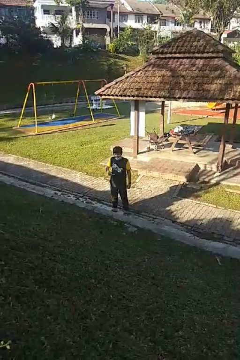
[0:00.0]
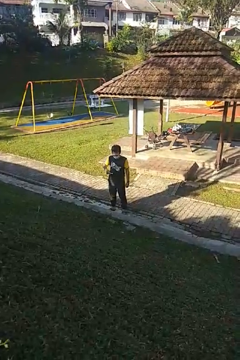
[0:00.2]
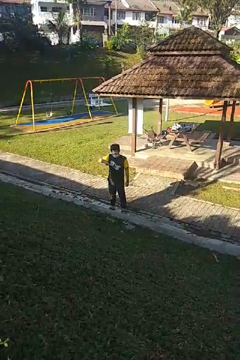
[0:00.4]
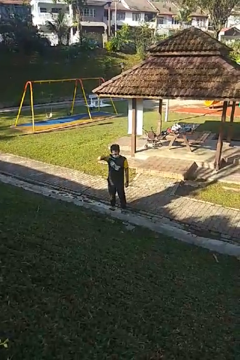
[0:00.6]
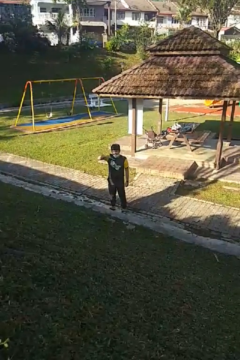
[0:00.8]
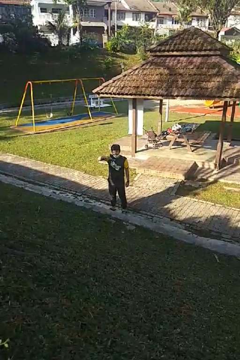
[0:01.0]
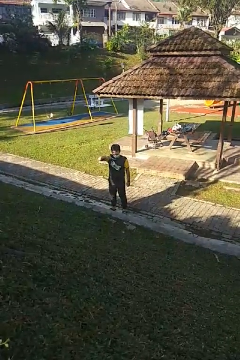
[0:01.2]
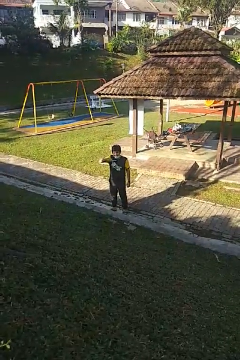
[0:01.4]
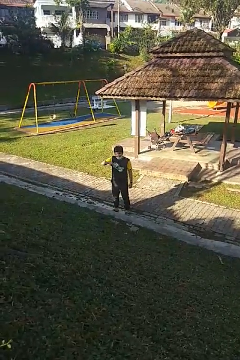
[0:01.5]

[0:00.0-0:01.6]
person brushes teeth

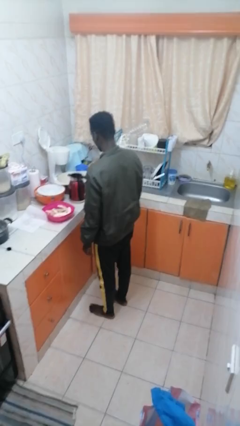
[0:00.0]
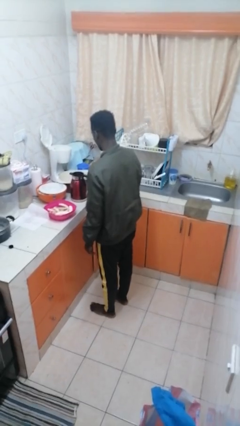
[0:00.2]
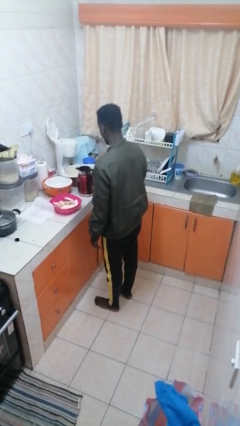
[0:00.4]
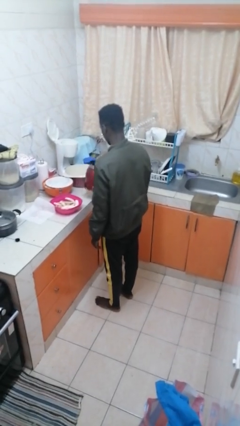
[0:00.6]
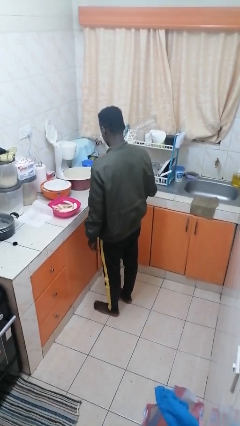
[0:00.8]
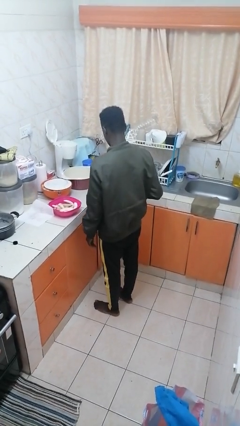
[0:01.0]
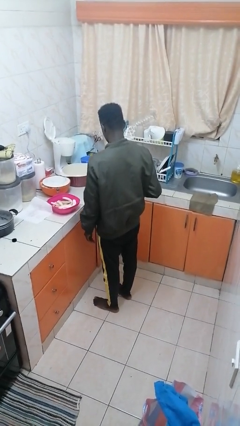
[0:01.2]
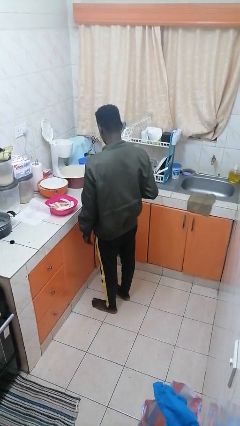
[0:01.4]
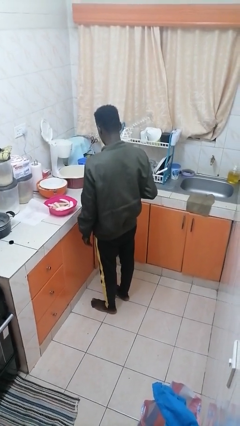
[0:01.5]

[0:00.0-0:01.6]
person picks up object from countertop

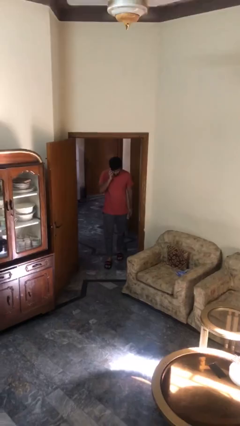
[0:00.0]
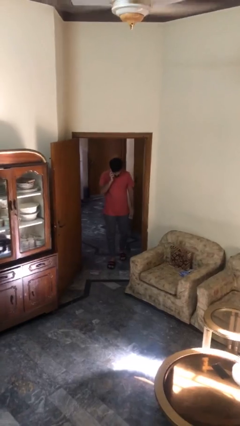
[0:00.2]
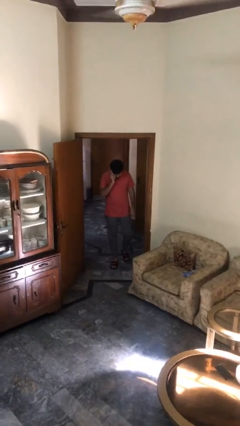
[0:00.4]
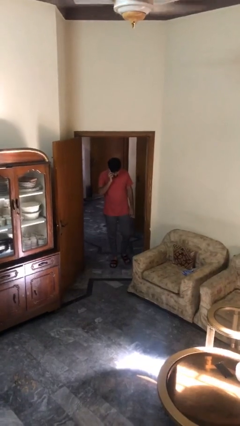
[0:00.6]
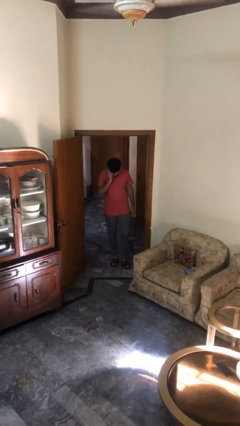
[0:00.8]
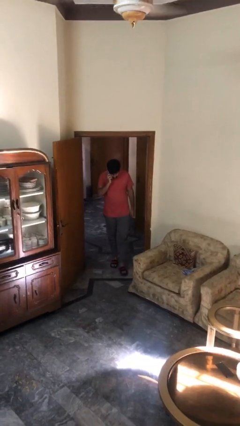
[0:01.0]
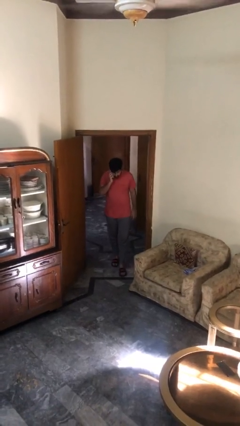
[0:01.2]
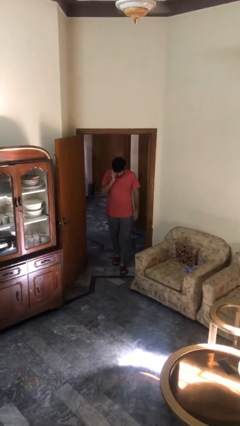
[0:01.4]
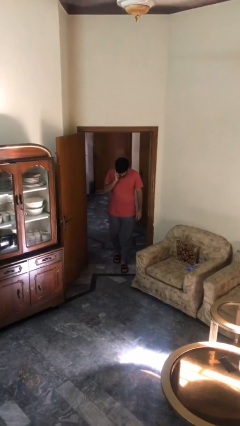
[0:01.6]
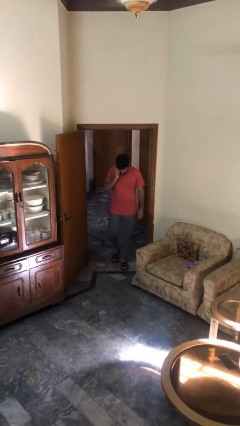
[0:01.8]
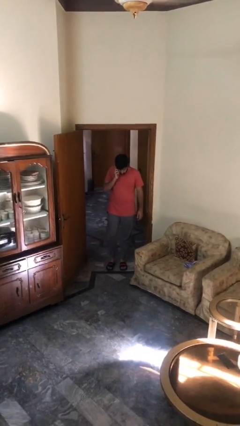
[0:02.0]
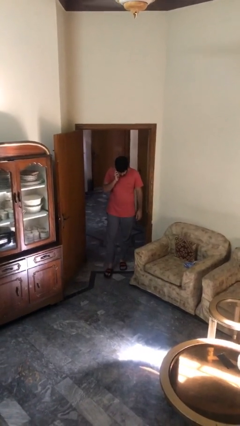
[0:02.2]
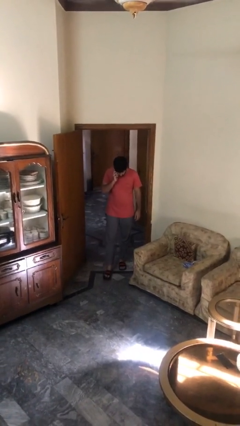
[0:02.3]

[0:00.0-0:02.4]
person enters scene through structure

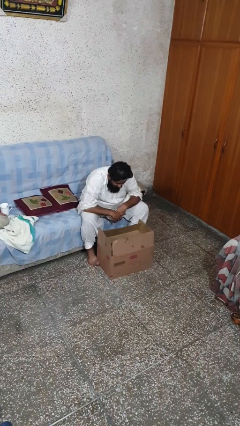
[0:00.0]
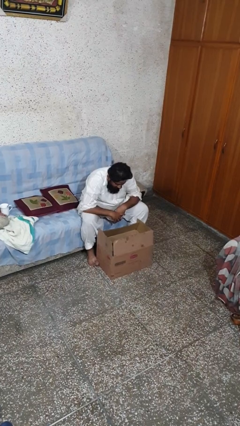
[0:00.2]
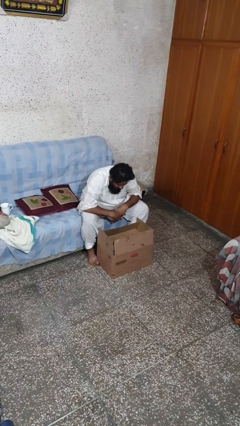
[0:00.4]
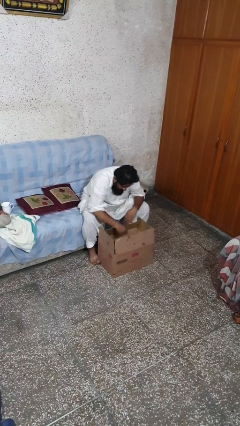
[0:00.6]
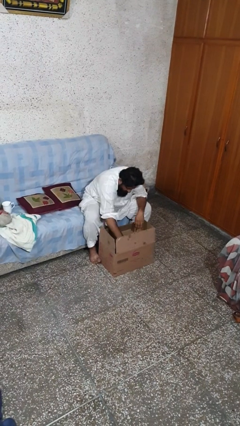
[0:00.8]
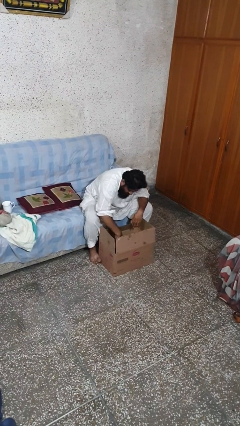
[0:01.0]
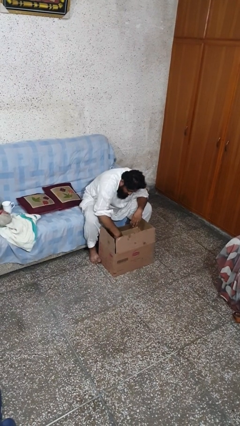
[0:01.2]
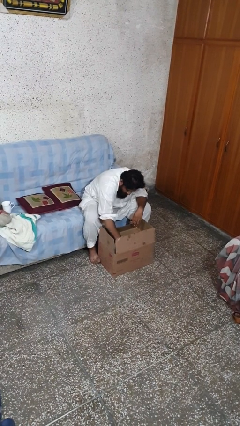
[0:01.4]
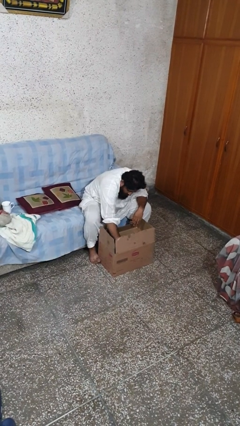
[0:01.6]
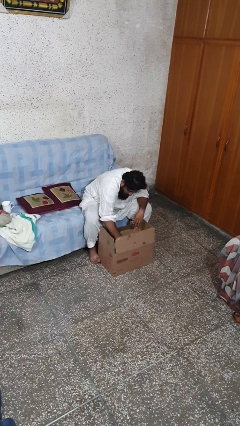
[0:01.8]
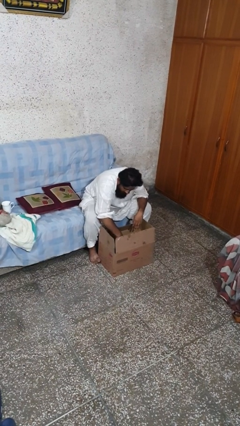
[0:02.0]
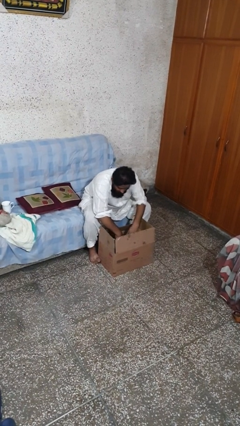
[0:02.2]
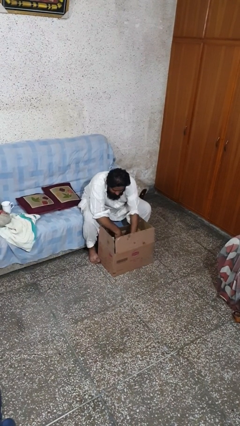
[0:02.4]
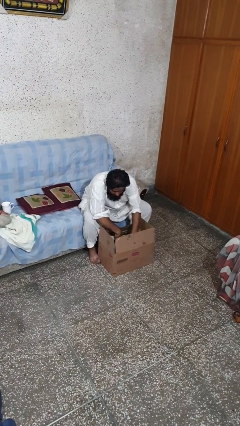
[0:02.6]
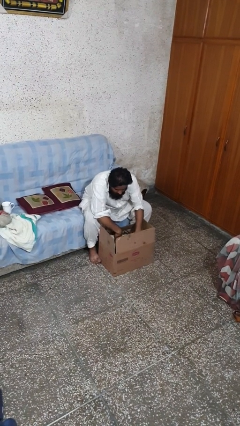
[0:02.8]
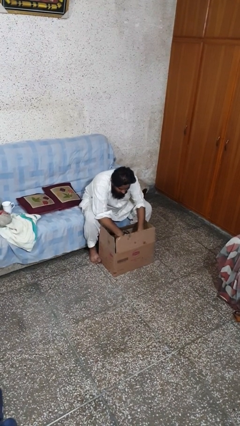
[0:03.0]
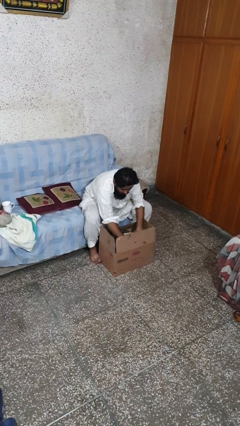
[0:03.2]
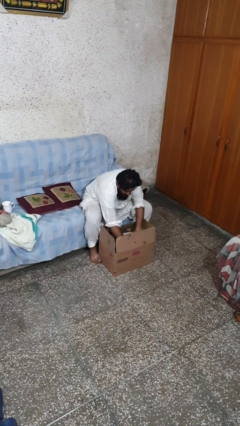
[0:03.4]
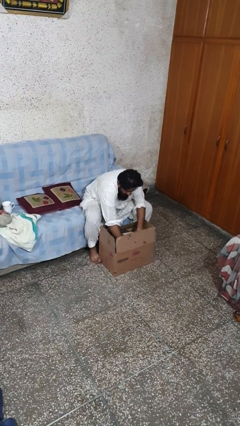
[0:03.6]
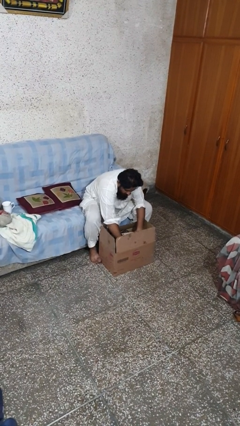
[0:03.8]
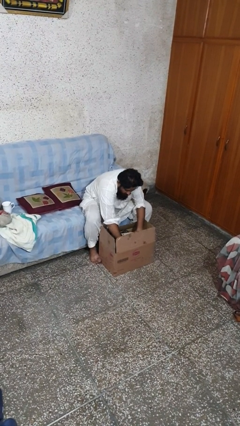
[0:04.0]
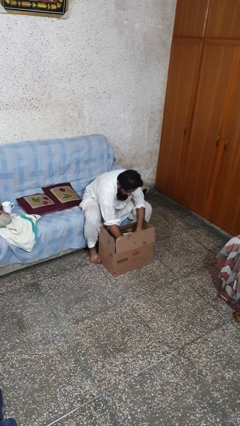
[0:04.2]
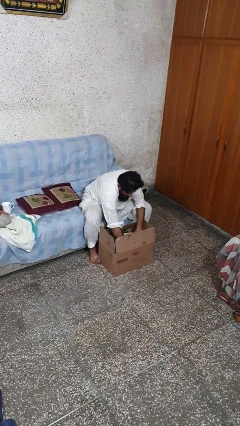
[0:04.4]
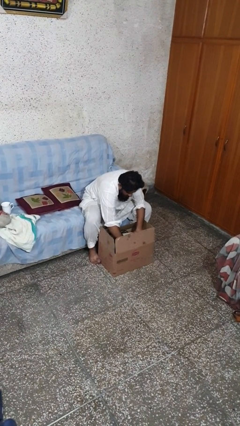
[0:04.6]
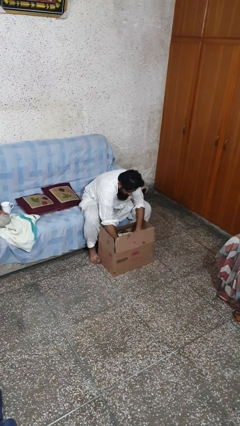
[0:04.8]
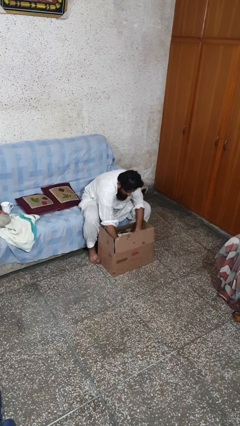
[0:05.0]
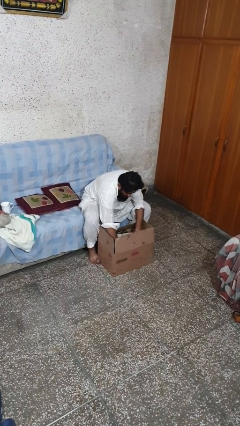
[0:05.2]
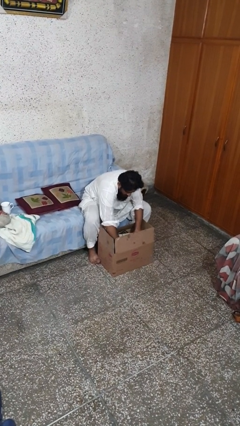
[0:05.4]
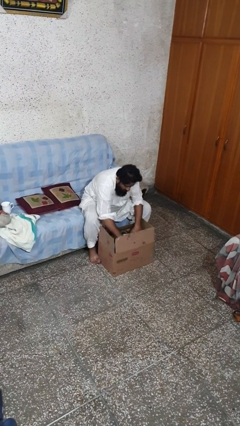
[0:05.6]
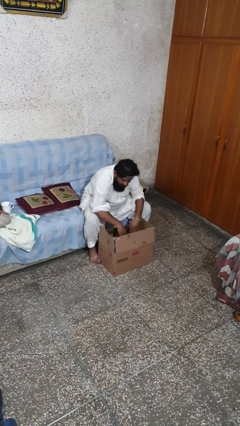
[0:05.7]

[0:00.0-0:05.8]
person searches in box

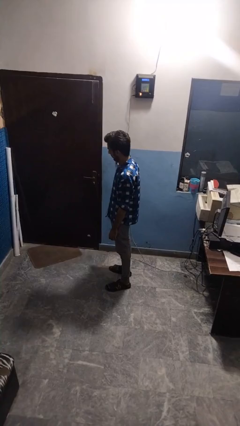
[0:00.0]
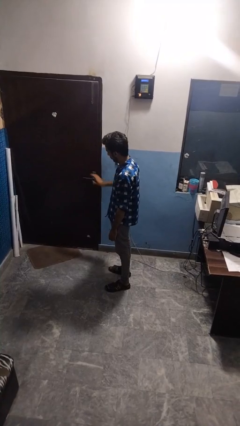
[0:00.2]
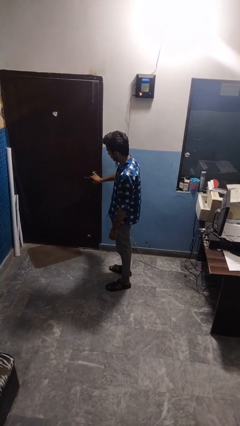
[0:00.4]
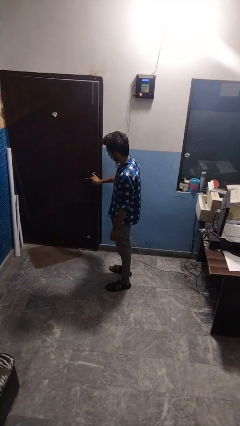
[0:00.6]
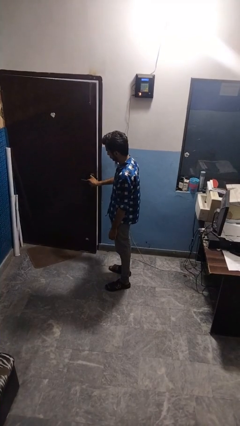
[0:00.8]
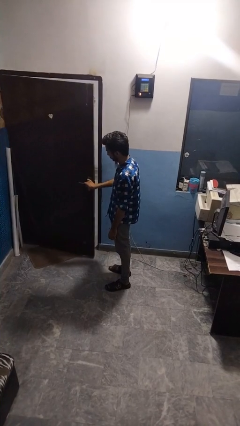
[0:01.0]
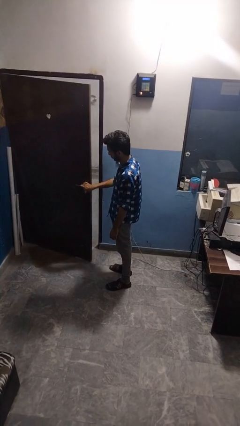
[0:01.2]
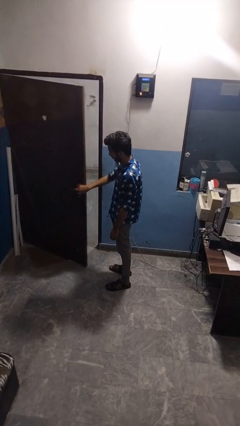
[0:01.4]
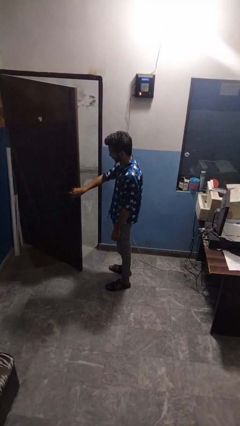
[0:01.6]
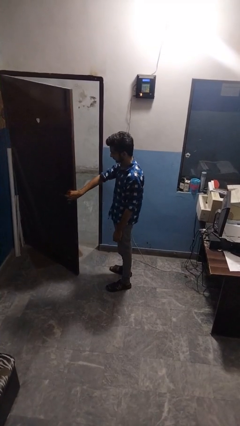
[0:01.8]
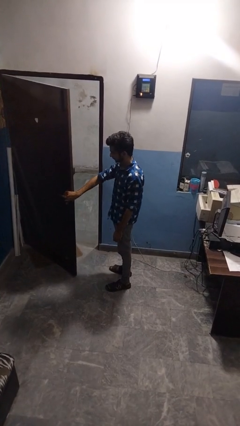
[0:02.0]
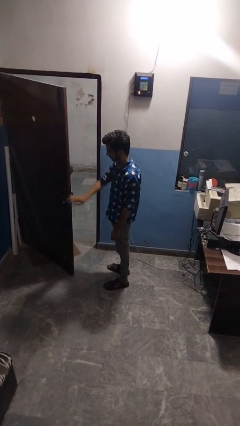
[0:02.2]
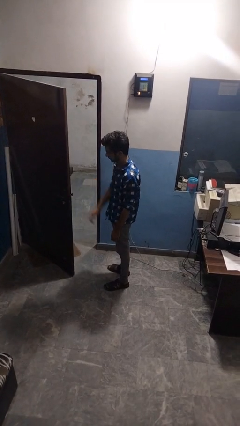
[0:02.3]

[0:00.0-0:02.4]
person opens facility door

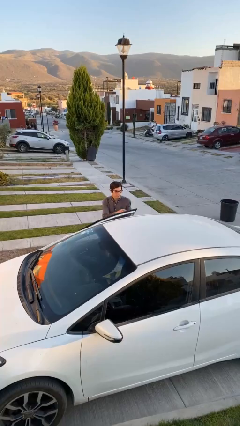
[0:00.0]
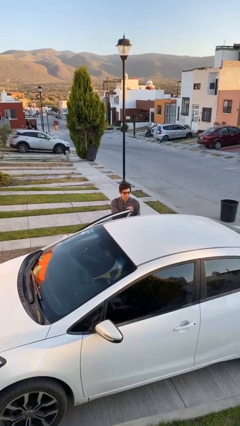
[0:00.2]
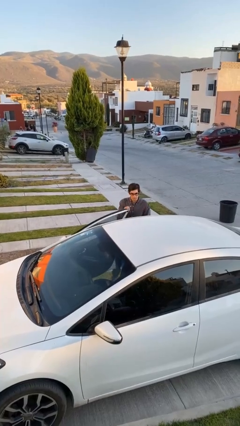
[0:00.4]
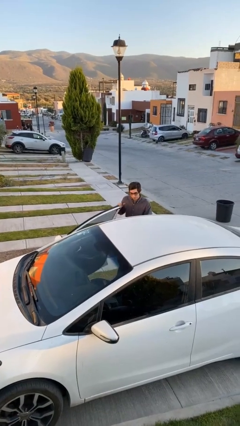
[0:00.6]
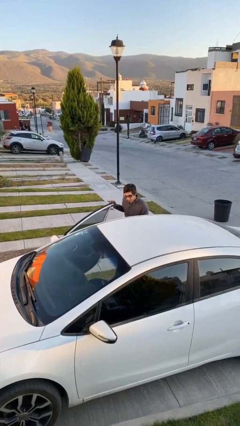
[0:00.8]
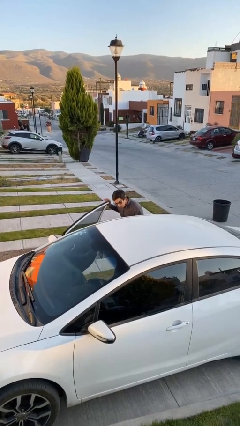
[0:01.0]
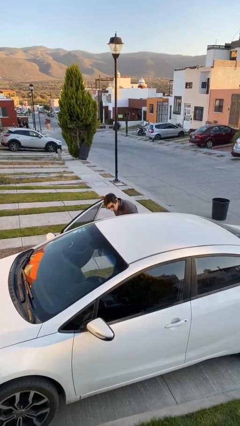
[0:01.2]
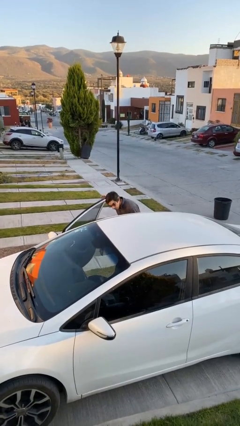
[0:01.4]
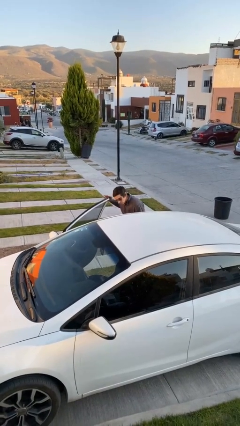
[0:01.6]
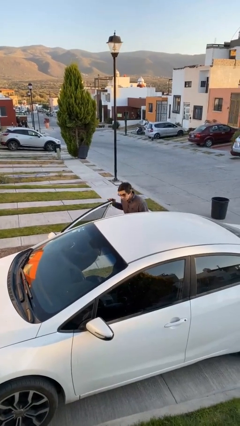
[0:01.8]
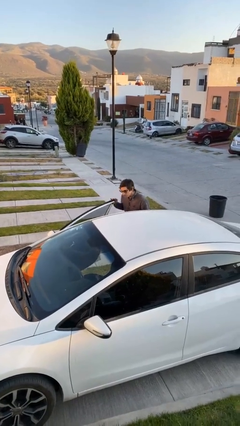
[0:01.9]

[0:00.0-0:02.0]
person opens car door

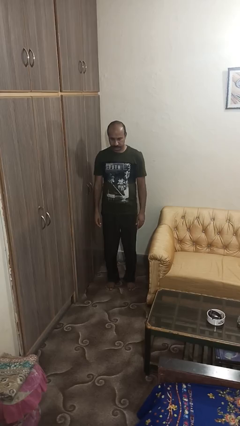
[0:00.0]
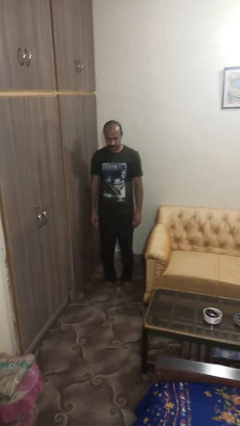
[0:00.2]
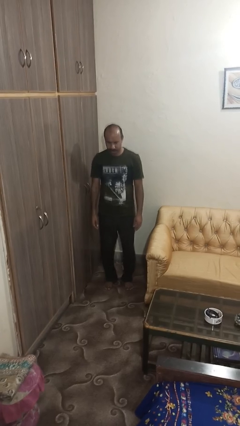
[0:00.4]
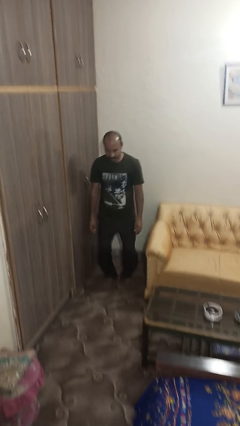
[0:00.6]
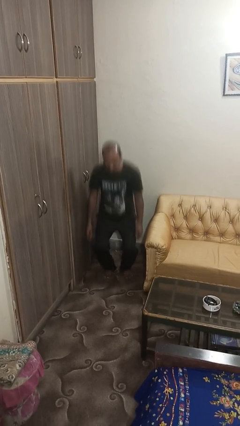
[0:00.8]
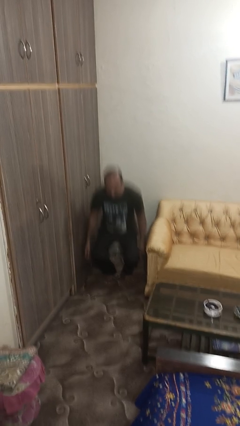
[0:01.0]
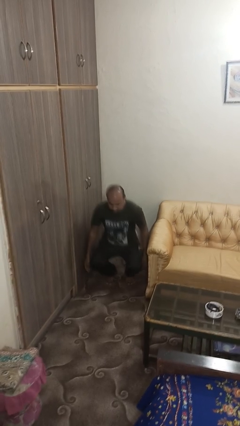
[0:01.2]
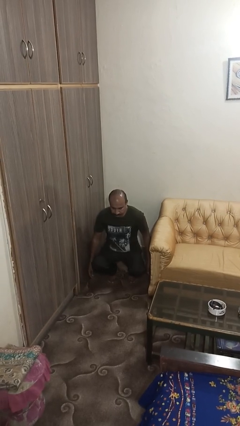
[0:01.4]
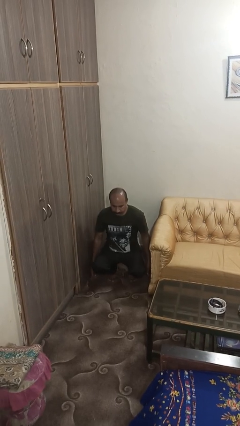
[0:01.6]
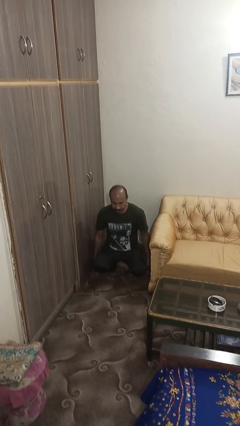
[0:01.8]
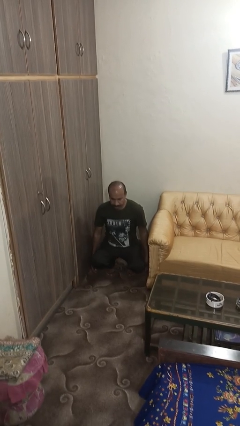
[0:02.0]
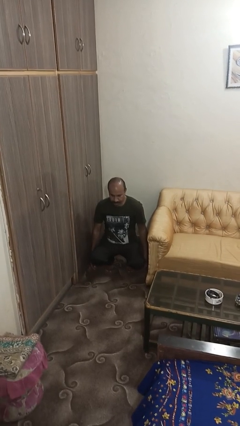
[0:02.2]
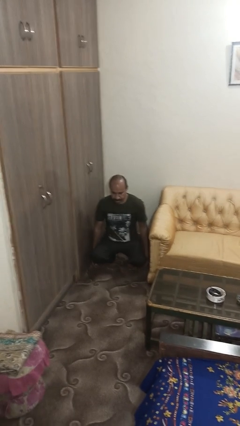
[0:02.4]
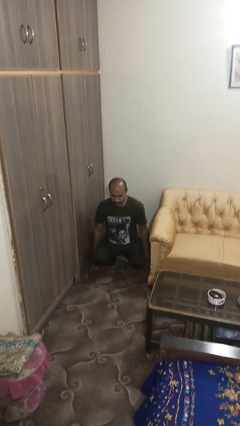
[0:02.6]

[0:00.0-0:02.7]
person squats
